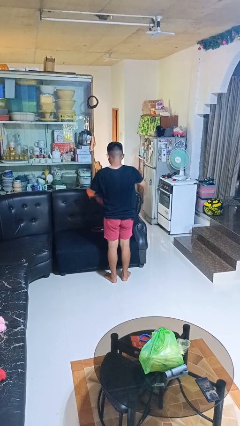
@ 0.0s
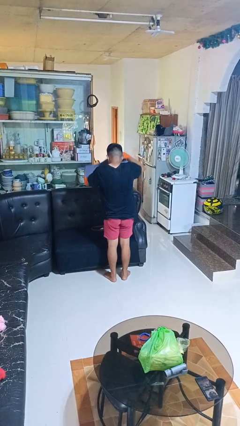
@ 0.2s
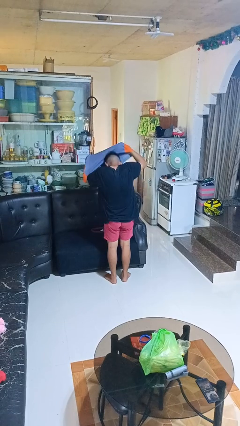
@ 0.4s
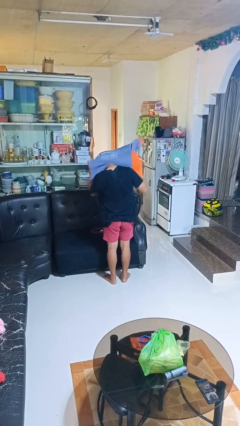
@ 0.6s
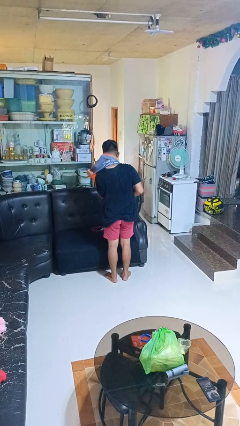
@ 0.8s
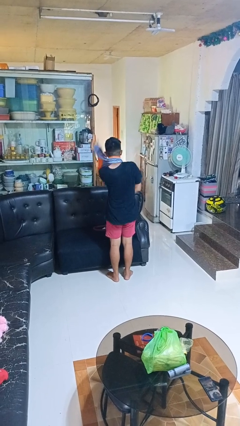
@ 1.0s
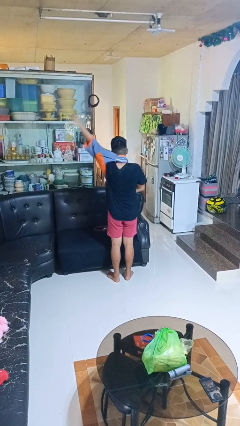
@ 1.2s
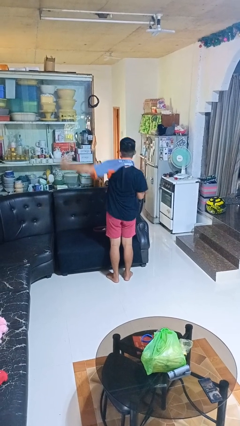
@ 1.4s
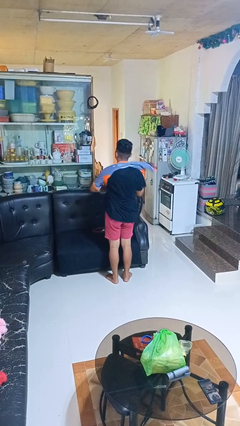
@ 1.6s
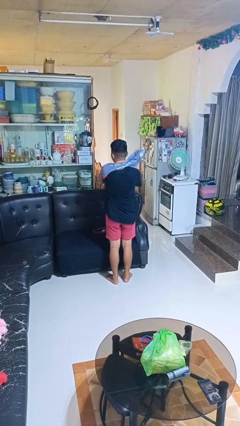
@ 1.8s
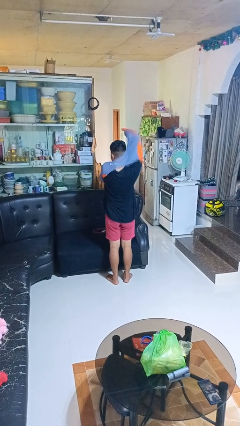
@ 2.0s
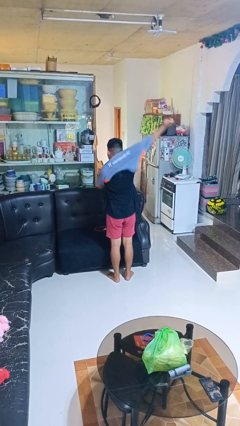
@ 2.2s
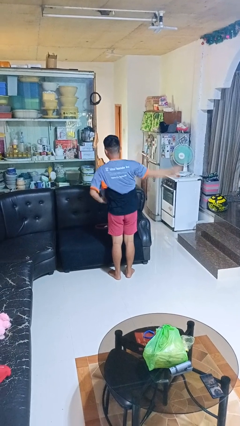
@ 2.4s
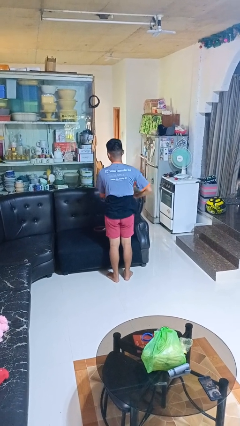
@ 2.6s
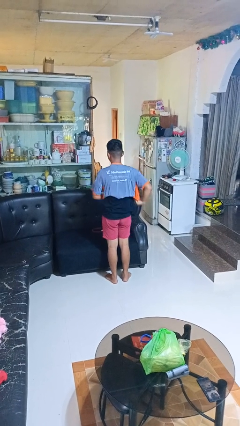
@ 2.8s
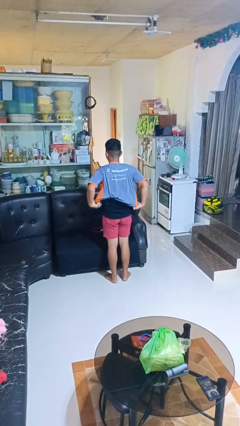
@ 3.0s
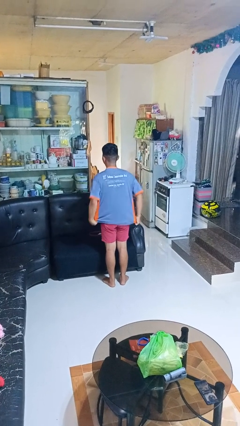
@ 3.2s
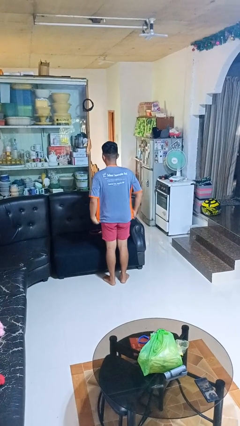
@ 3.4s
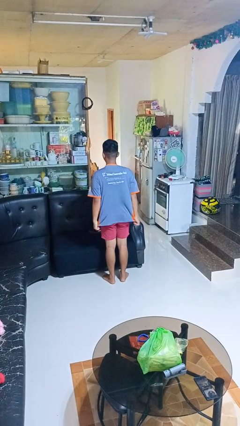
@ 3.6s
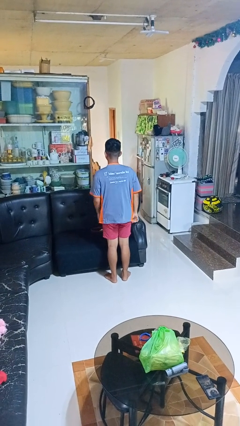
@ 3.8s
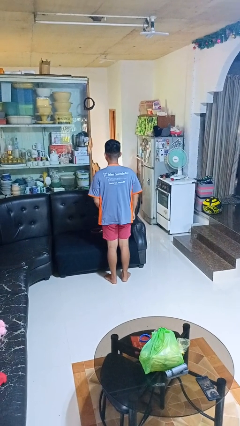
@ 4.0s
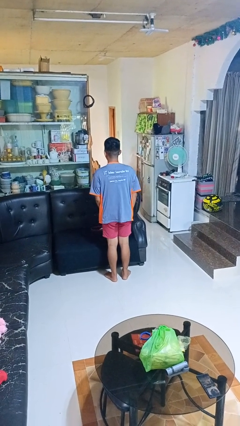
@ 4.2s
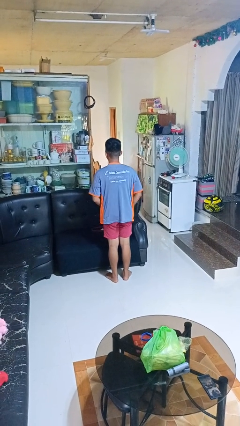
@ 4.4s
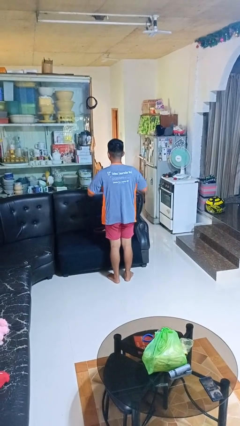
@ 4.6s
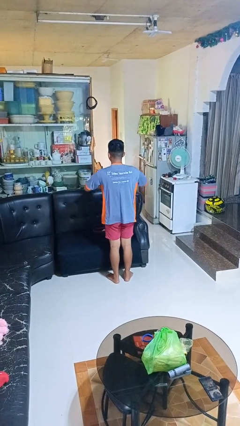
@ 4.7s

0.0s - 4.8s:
person puts on shirt

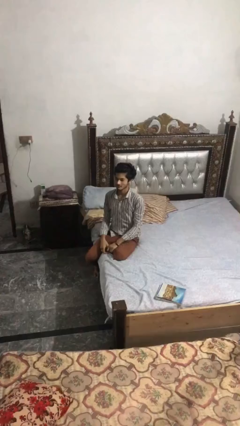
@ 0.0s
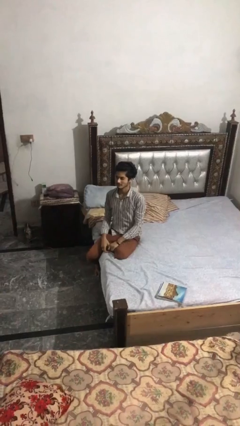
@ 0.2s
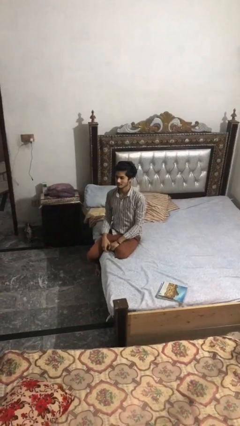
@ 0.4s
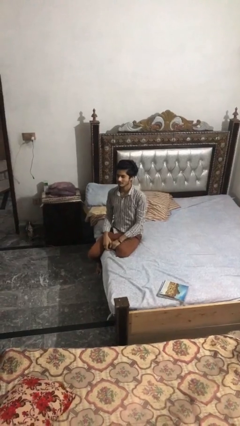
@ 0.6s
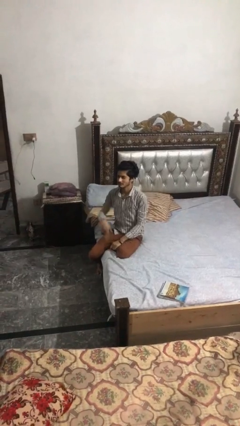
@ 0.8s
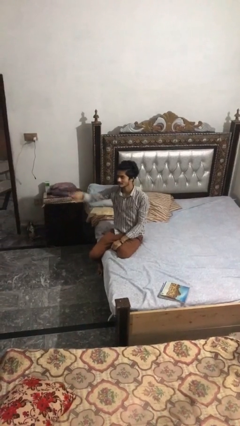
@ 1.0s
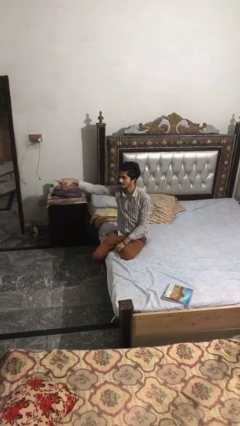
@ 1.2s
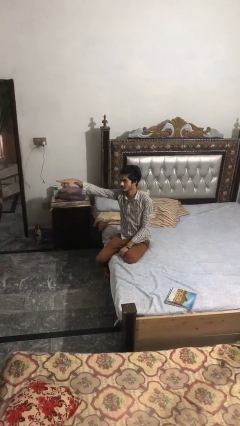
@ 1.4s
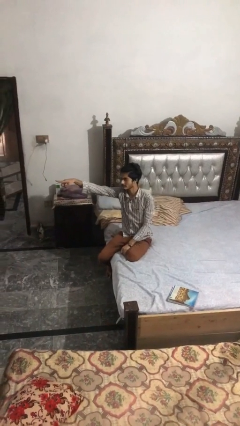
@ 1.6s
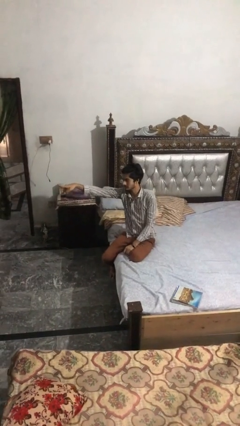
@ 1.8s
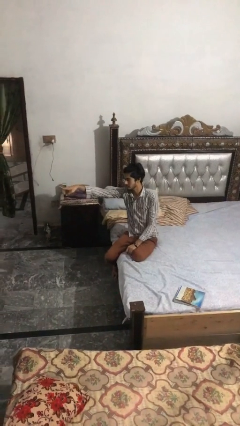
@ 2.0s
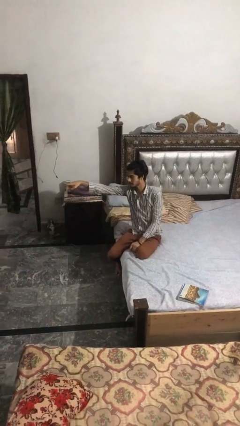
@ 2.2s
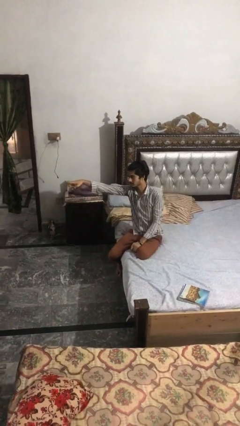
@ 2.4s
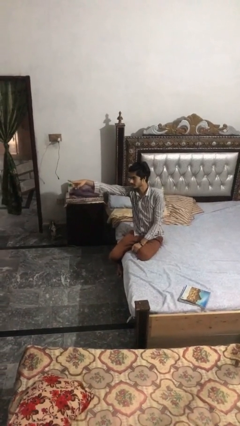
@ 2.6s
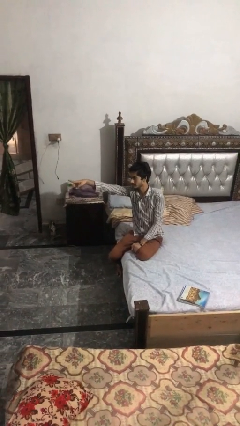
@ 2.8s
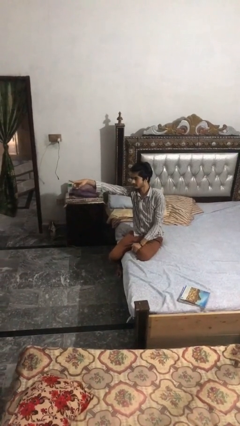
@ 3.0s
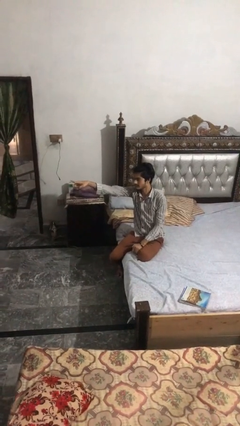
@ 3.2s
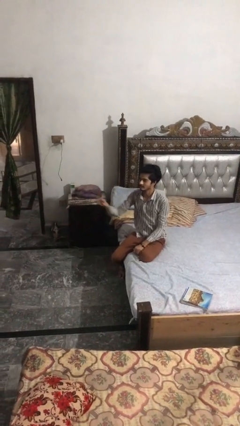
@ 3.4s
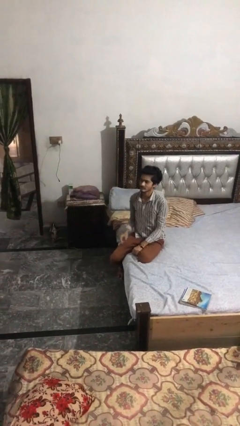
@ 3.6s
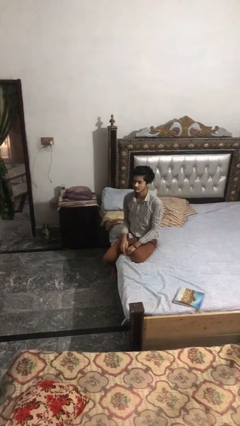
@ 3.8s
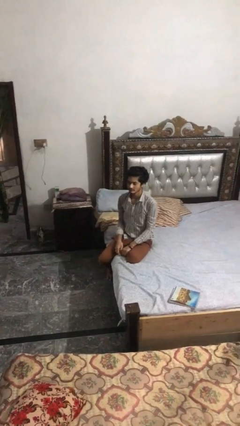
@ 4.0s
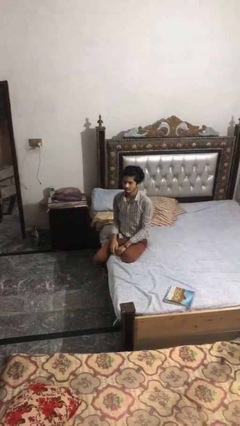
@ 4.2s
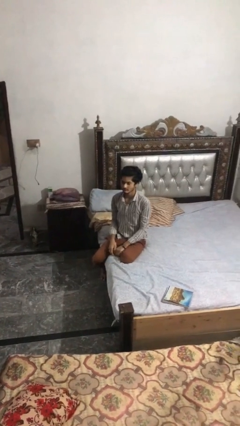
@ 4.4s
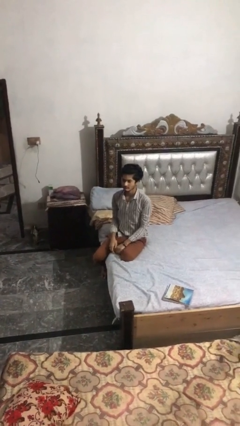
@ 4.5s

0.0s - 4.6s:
person points at person

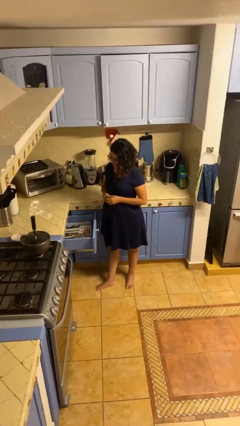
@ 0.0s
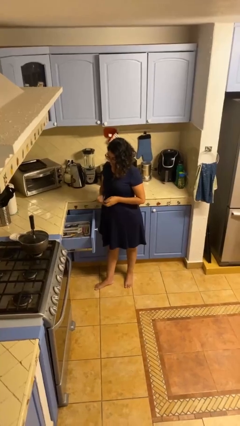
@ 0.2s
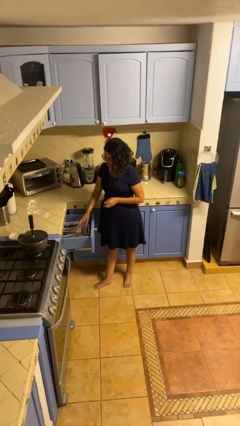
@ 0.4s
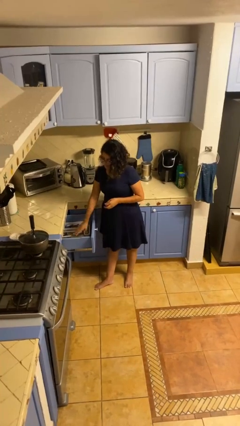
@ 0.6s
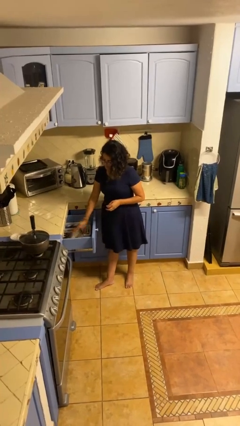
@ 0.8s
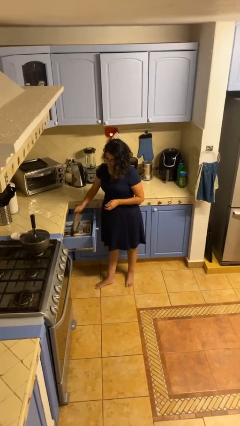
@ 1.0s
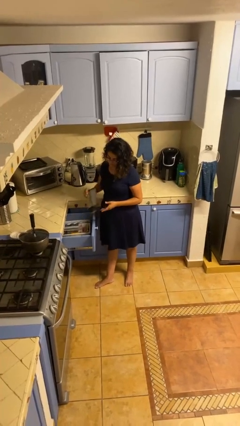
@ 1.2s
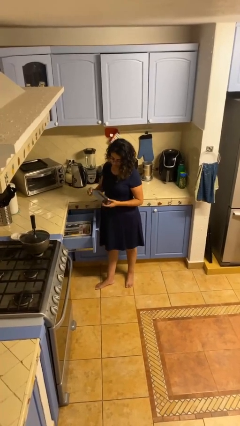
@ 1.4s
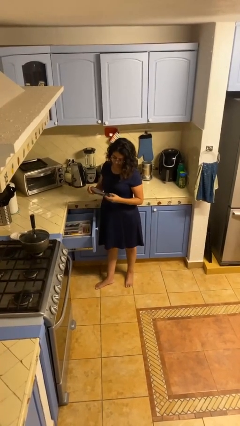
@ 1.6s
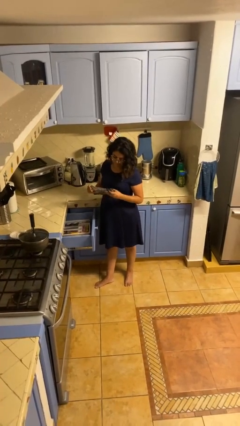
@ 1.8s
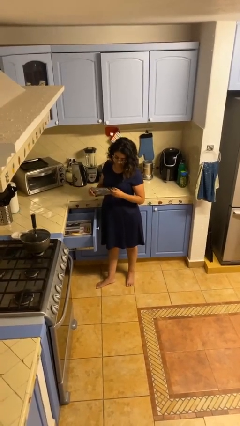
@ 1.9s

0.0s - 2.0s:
person takes object from kitchen drawer

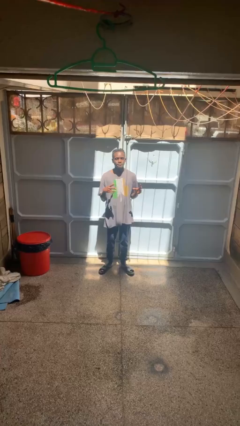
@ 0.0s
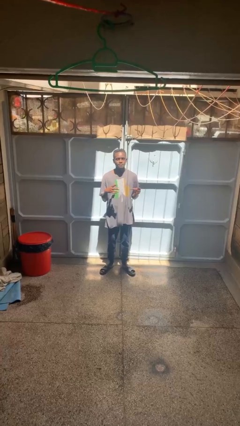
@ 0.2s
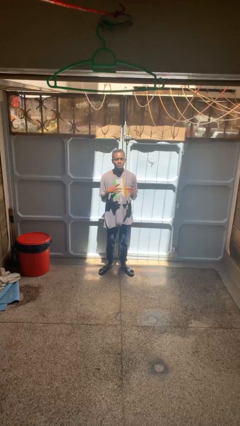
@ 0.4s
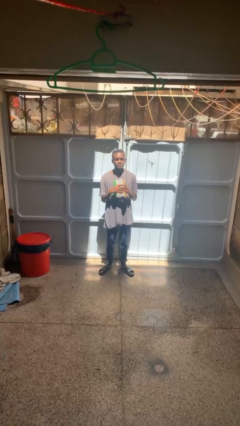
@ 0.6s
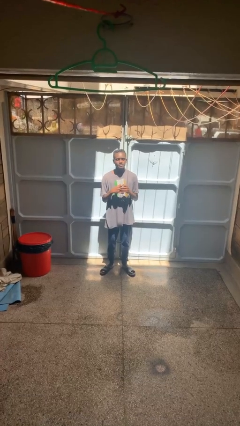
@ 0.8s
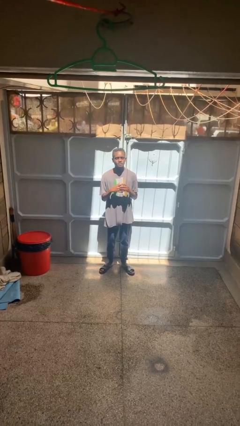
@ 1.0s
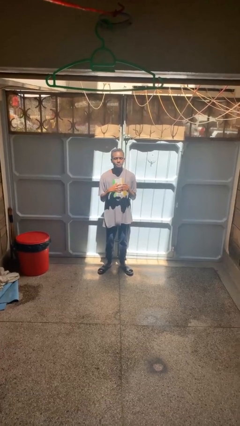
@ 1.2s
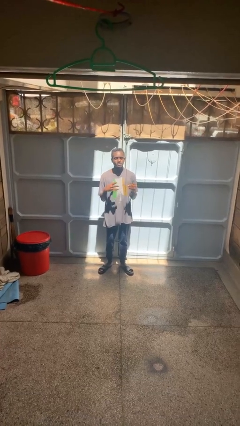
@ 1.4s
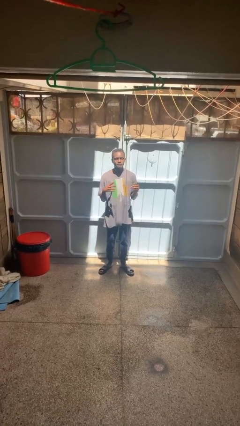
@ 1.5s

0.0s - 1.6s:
person takes off ring

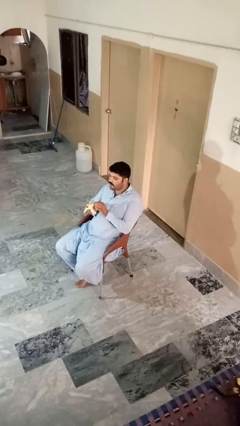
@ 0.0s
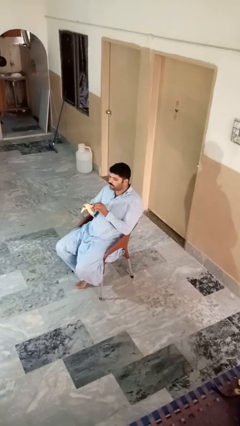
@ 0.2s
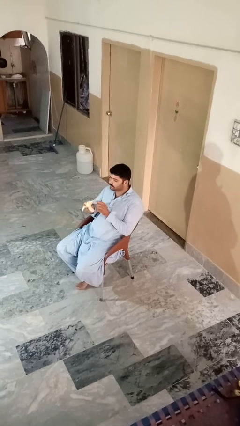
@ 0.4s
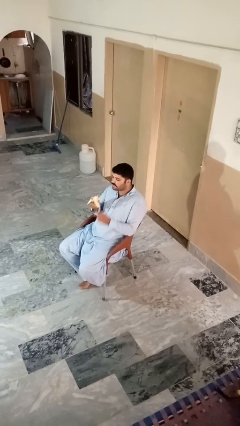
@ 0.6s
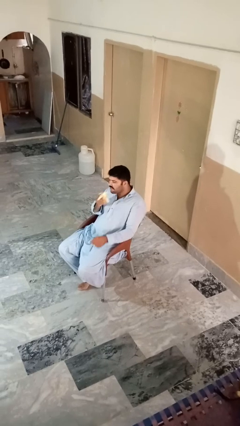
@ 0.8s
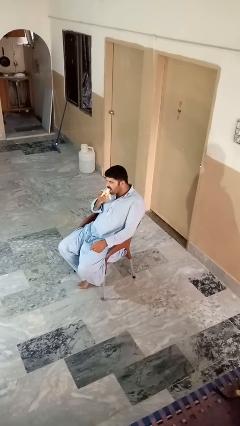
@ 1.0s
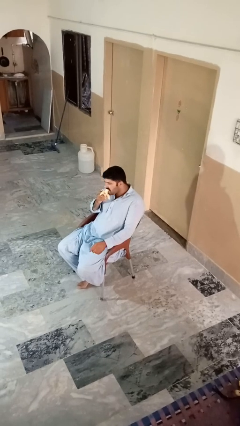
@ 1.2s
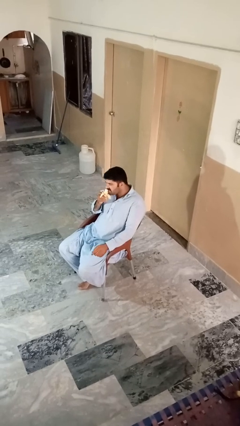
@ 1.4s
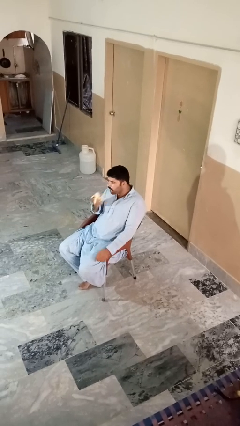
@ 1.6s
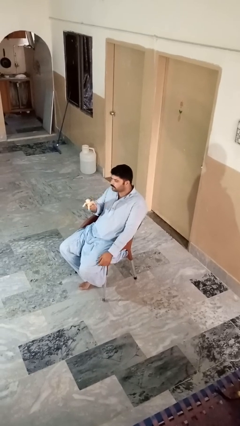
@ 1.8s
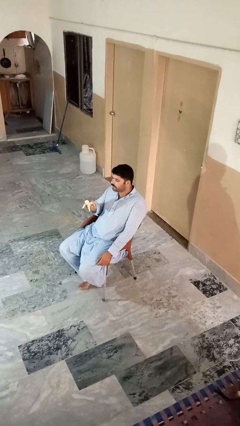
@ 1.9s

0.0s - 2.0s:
person eats banana

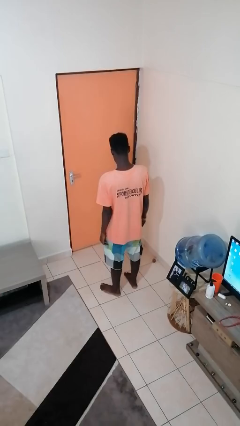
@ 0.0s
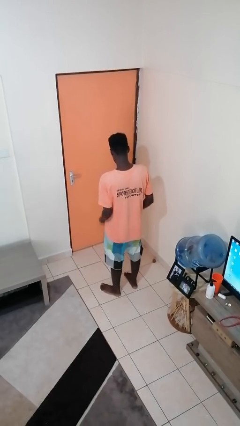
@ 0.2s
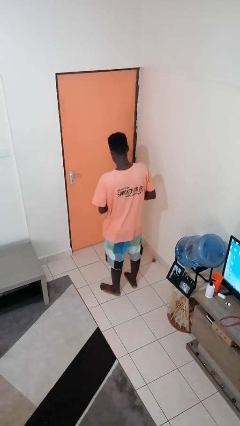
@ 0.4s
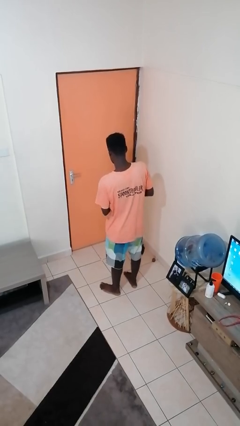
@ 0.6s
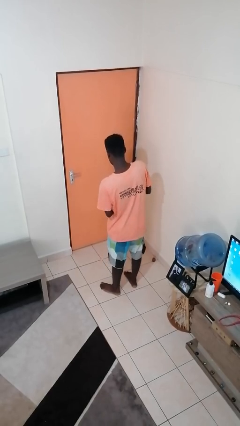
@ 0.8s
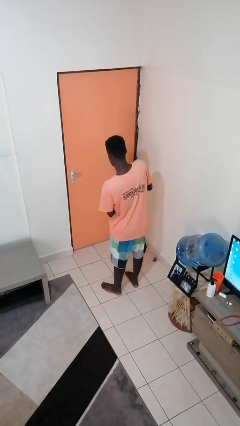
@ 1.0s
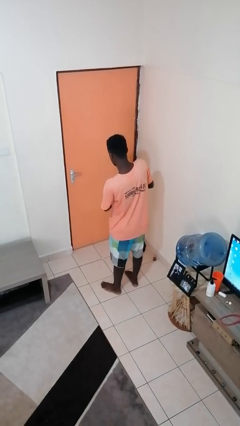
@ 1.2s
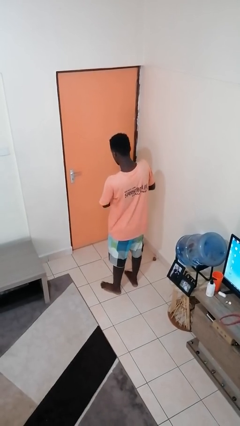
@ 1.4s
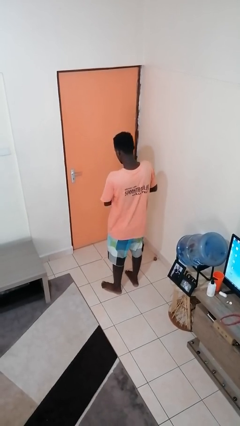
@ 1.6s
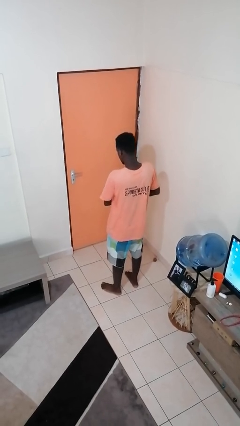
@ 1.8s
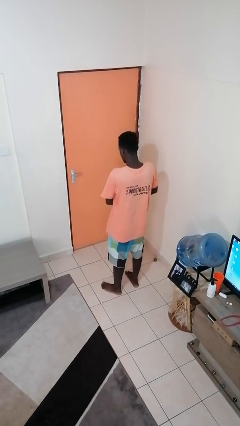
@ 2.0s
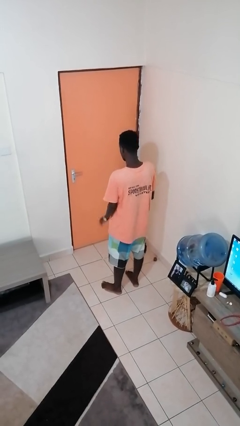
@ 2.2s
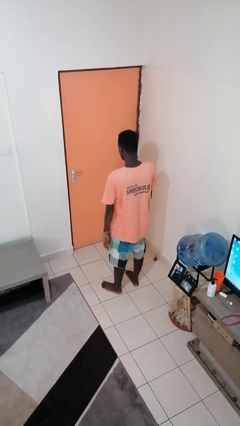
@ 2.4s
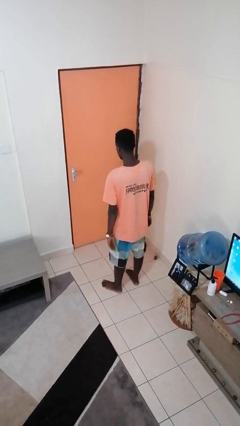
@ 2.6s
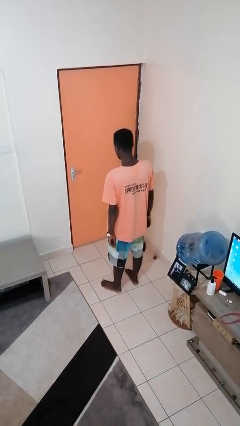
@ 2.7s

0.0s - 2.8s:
person puts on wristwatch
